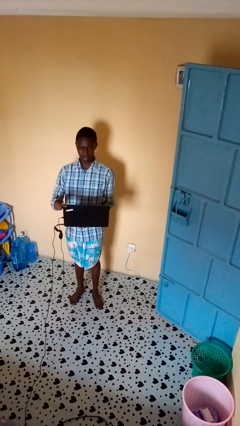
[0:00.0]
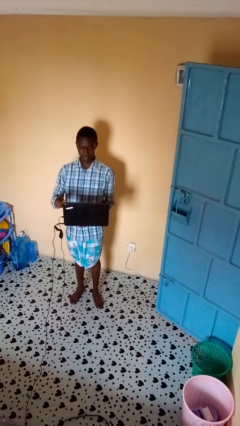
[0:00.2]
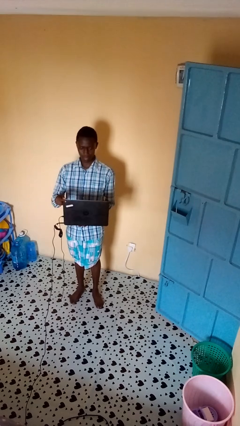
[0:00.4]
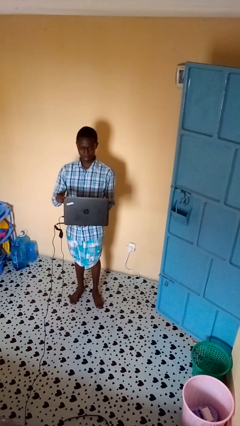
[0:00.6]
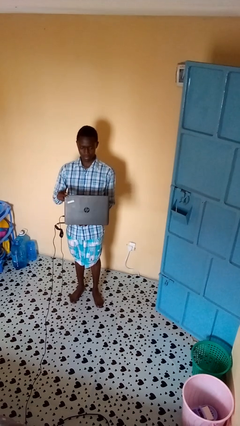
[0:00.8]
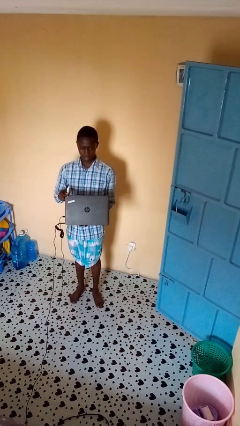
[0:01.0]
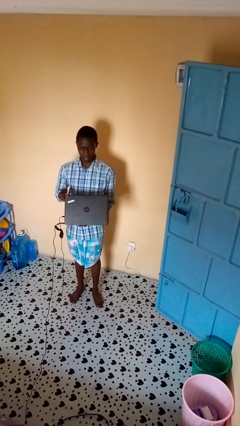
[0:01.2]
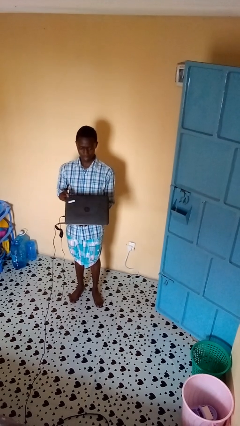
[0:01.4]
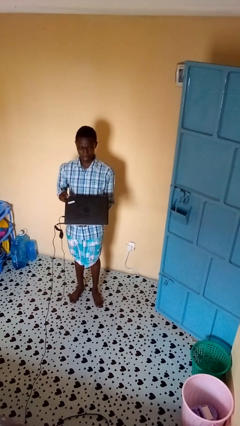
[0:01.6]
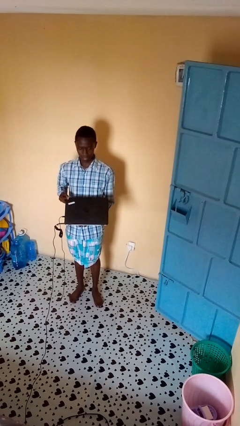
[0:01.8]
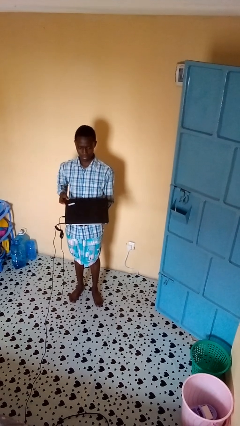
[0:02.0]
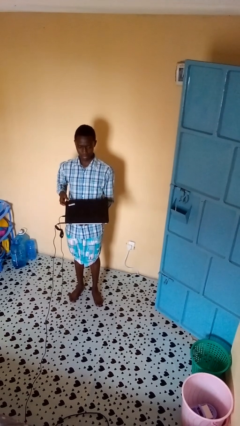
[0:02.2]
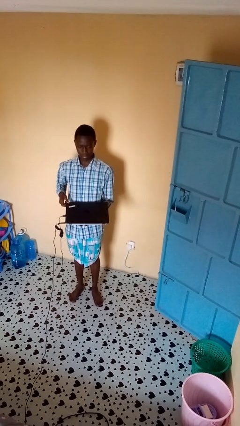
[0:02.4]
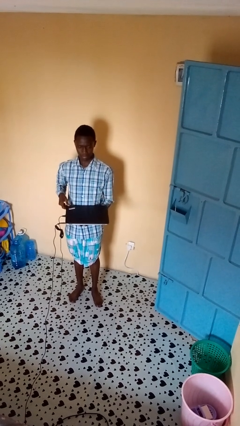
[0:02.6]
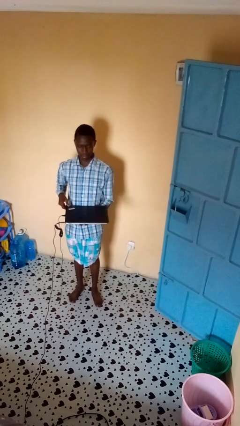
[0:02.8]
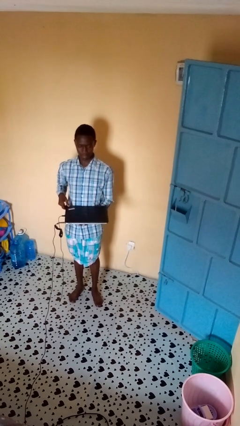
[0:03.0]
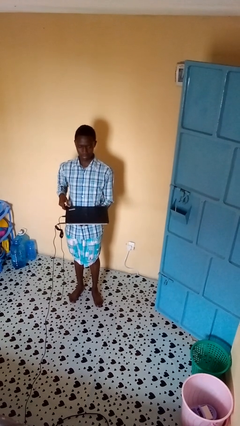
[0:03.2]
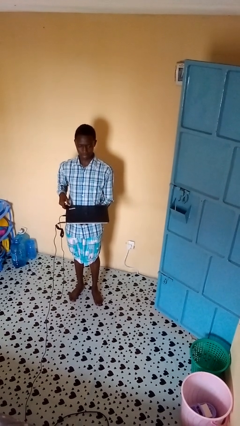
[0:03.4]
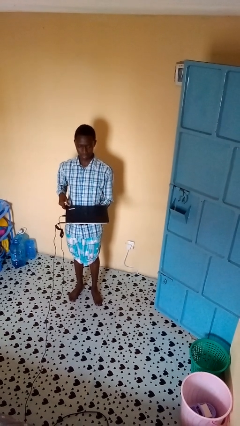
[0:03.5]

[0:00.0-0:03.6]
person closes laptop

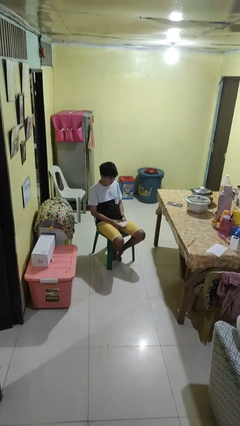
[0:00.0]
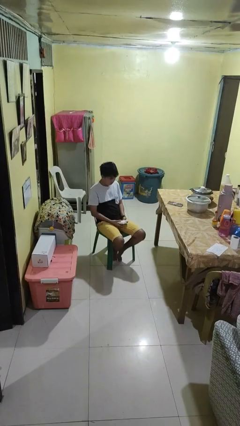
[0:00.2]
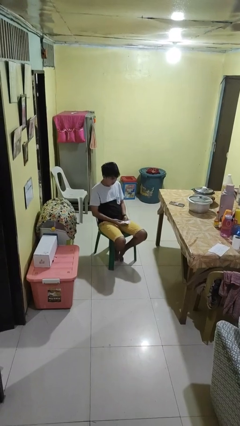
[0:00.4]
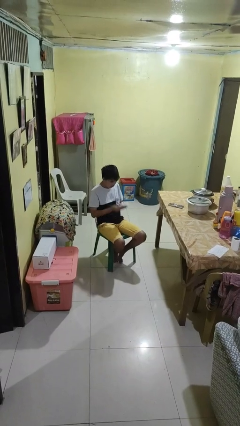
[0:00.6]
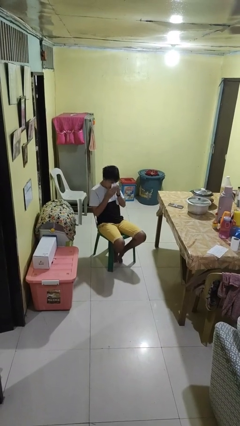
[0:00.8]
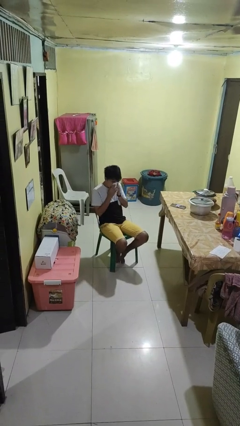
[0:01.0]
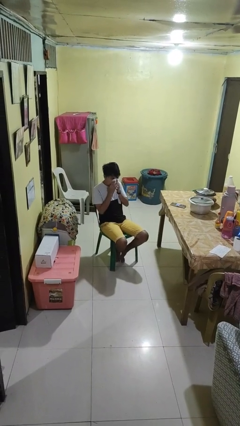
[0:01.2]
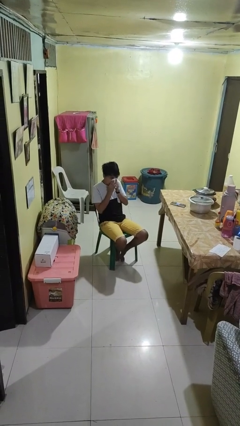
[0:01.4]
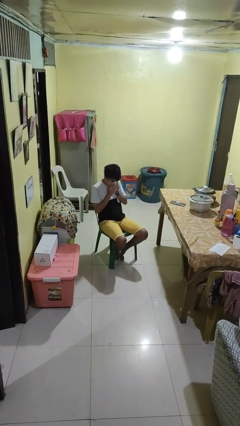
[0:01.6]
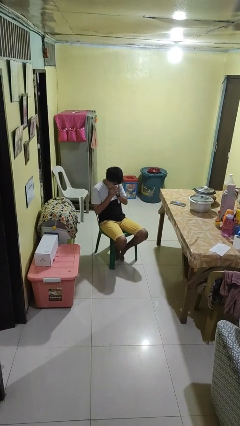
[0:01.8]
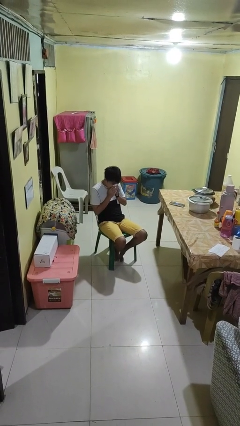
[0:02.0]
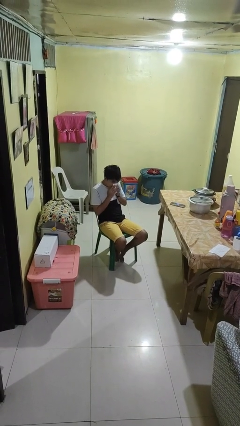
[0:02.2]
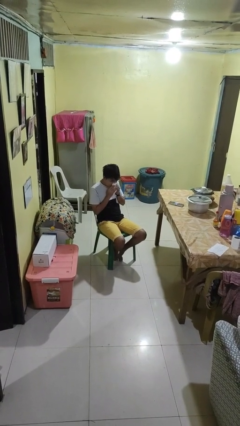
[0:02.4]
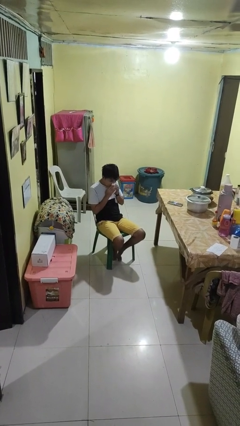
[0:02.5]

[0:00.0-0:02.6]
person blows nose

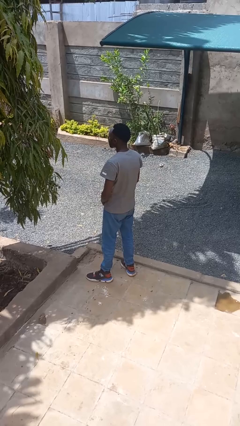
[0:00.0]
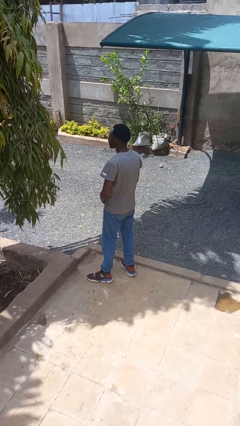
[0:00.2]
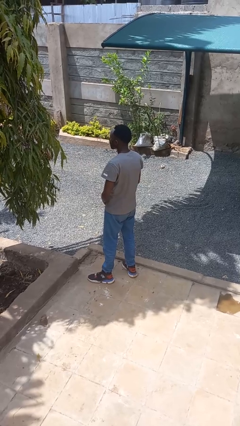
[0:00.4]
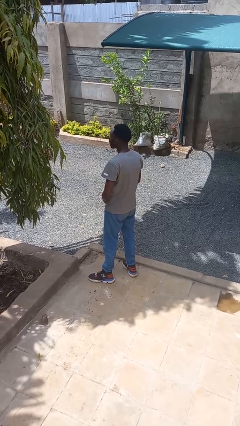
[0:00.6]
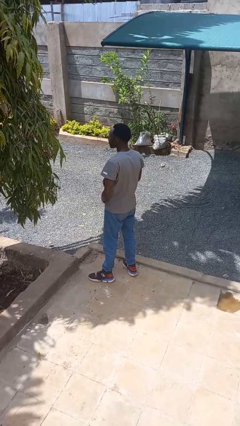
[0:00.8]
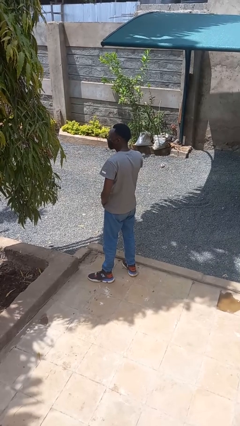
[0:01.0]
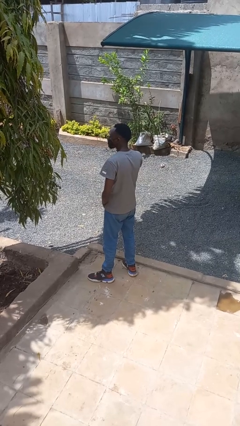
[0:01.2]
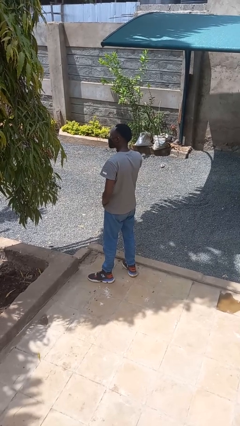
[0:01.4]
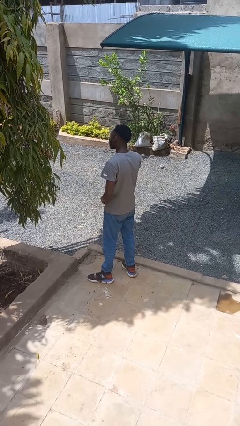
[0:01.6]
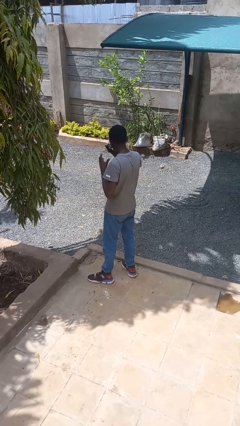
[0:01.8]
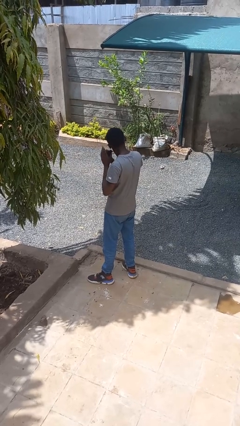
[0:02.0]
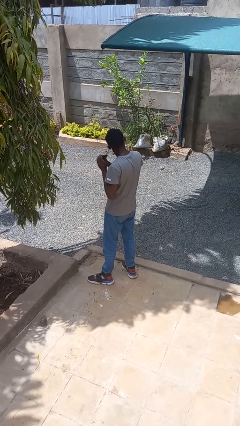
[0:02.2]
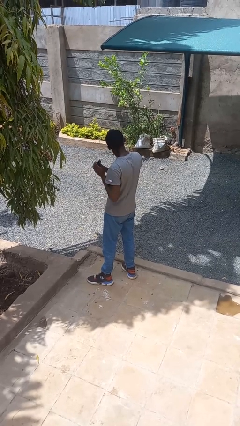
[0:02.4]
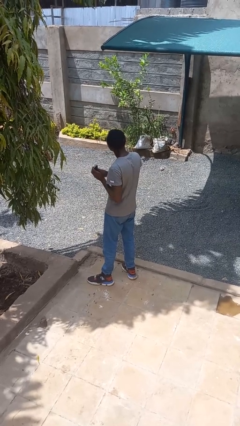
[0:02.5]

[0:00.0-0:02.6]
person takes off facemask

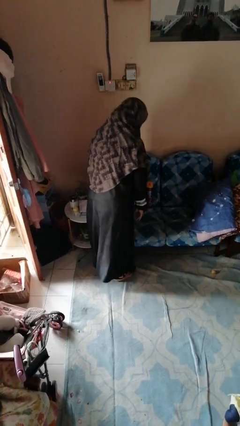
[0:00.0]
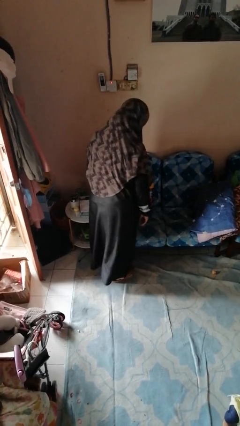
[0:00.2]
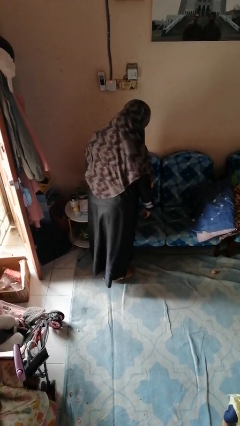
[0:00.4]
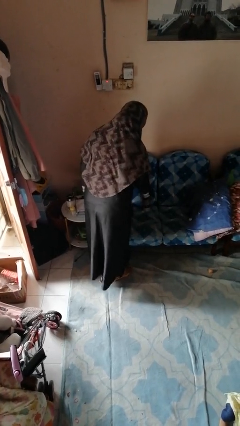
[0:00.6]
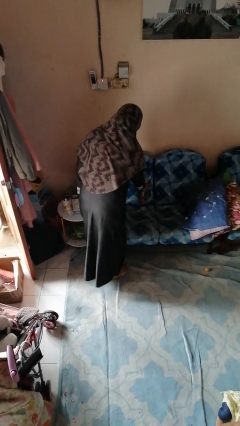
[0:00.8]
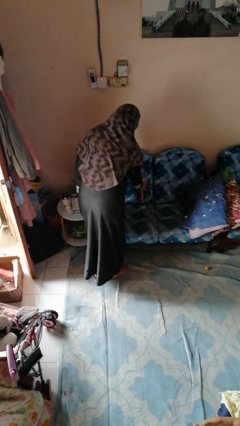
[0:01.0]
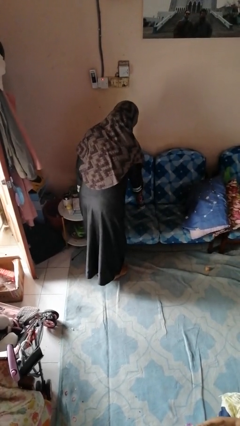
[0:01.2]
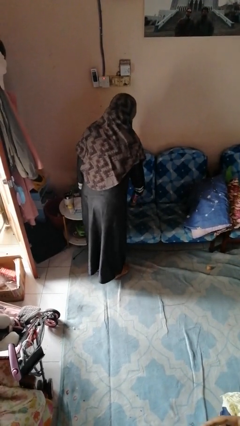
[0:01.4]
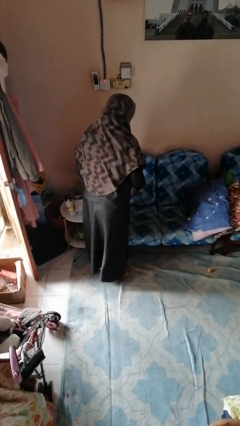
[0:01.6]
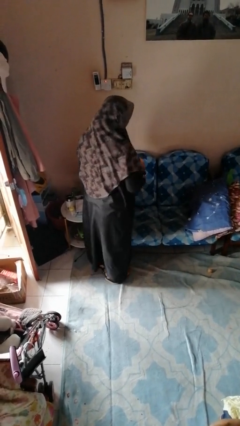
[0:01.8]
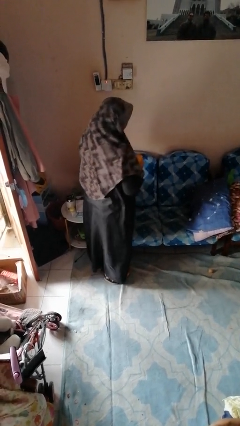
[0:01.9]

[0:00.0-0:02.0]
person picks up object from couch

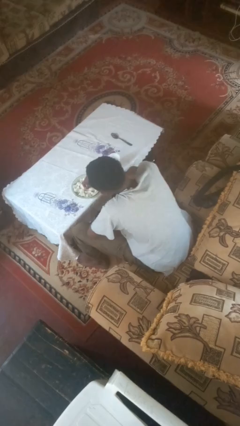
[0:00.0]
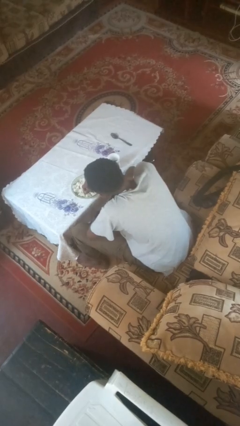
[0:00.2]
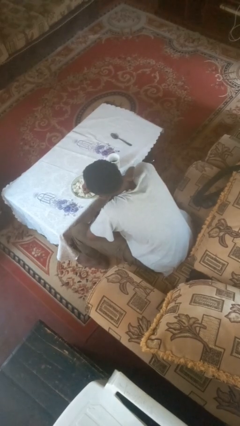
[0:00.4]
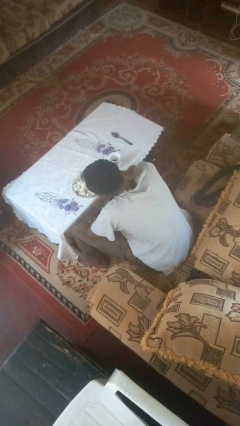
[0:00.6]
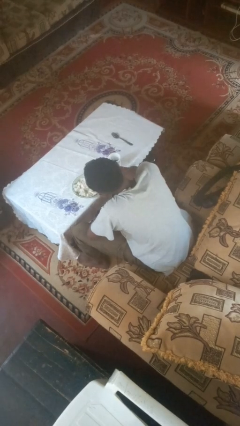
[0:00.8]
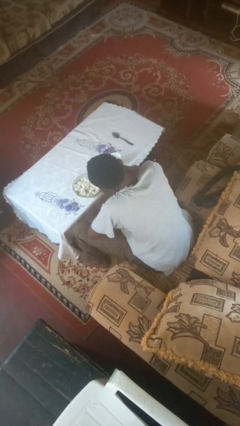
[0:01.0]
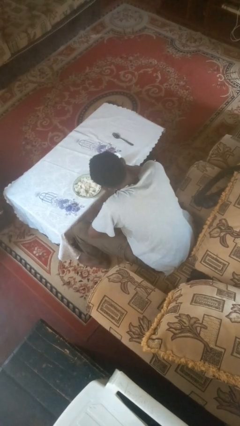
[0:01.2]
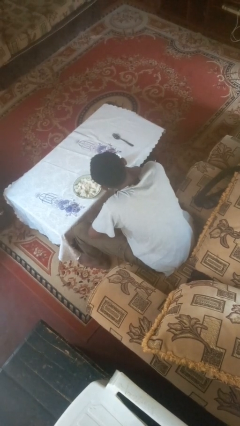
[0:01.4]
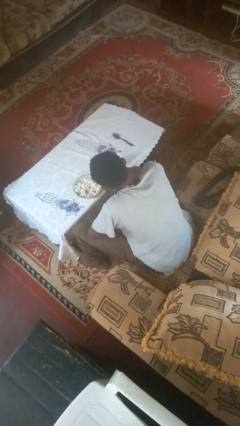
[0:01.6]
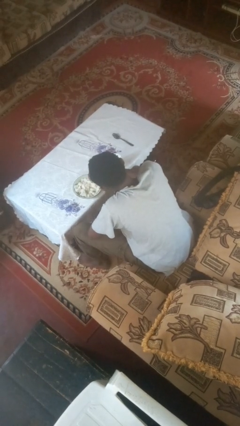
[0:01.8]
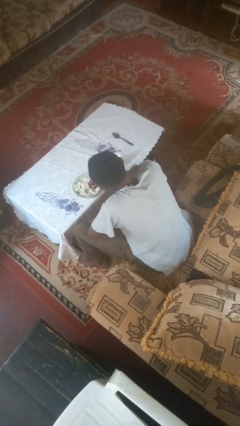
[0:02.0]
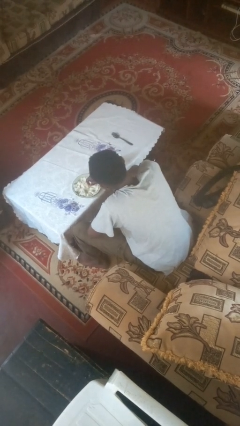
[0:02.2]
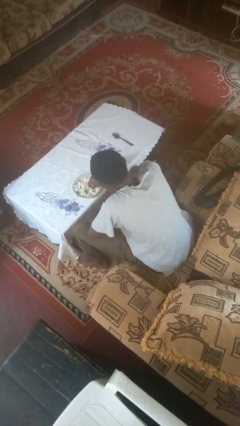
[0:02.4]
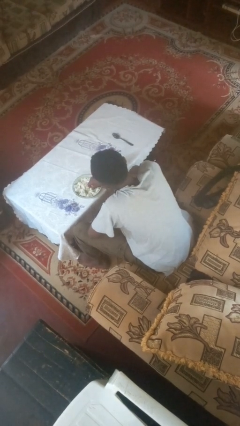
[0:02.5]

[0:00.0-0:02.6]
person eats with hands

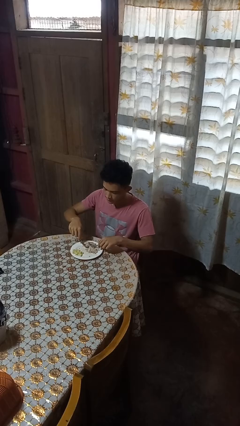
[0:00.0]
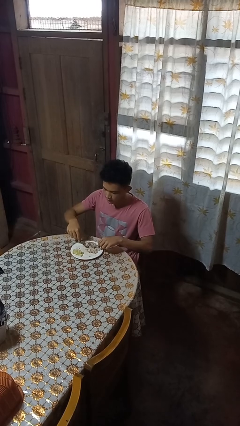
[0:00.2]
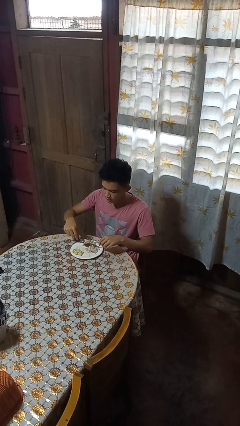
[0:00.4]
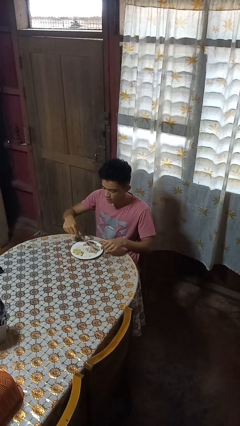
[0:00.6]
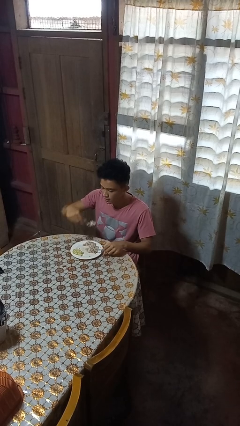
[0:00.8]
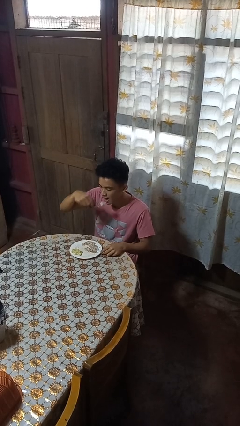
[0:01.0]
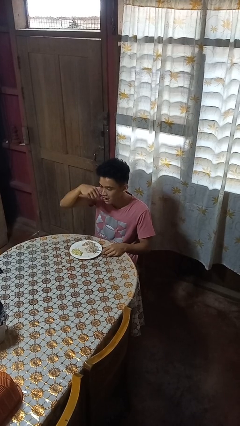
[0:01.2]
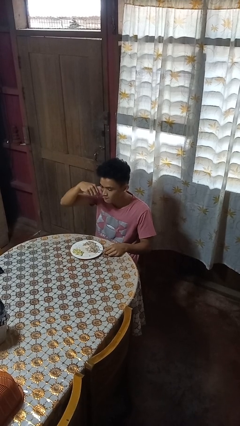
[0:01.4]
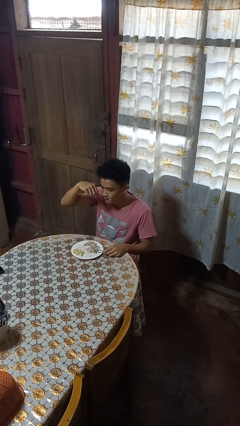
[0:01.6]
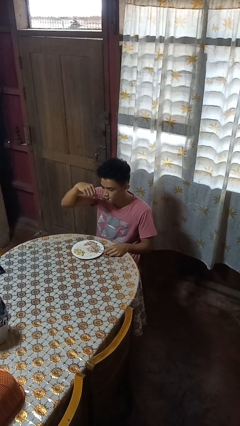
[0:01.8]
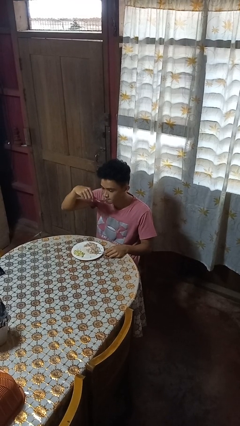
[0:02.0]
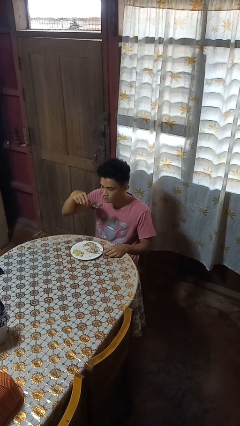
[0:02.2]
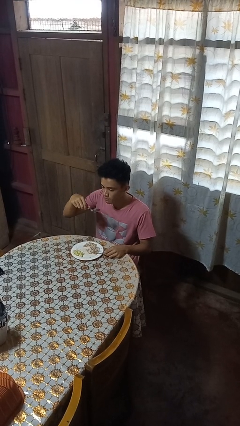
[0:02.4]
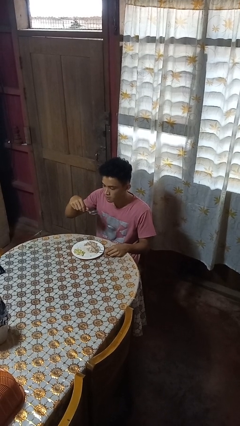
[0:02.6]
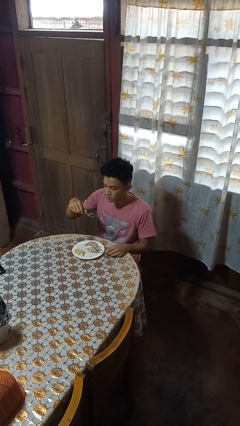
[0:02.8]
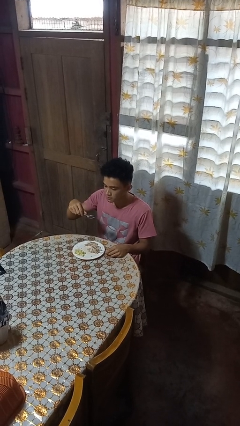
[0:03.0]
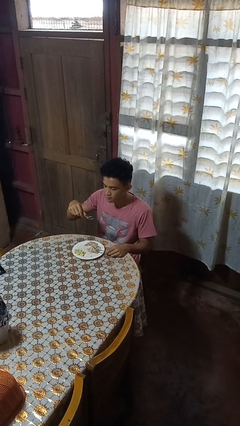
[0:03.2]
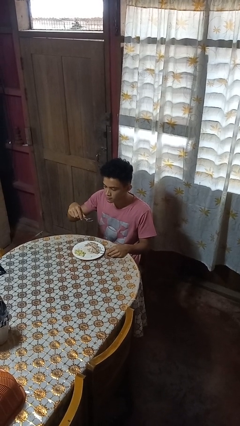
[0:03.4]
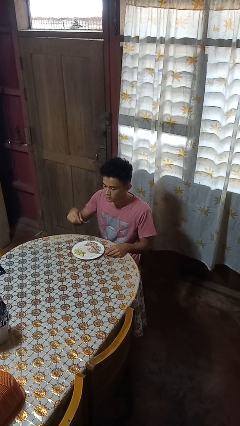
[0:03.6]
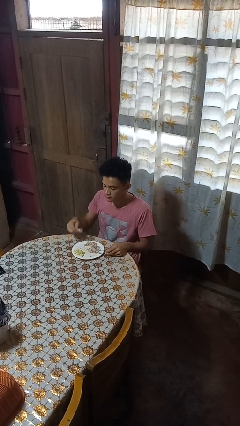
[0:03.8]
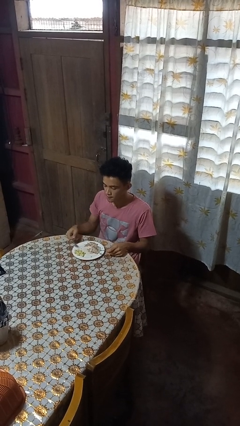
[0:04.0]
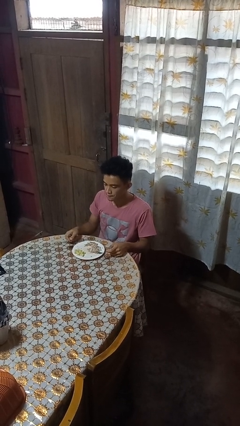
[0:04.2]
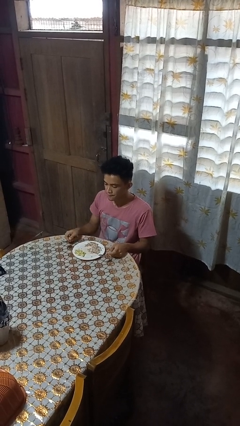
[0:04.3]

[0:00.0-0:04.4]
person eats with utensil
